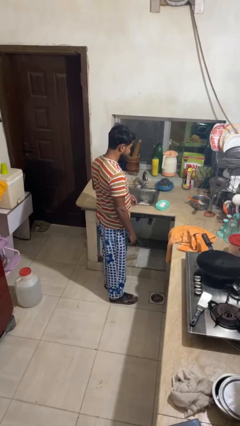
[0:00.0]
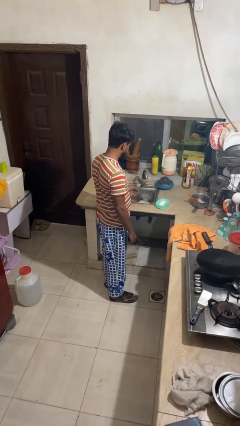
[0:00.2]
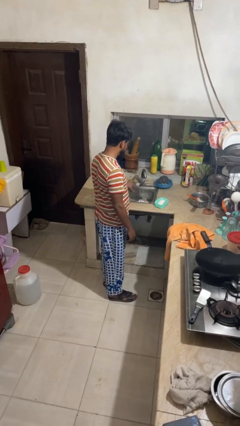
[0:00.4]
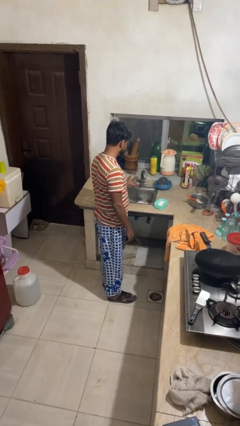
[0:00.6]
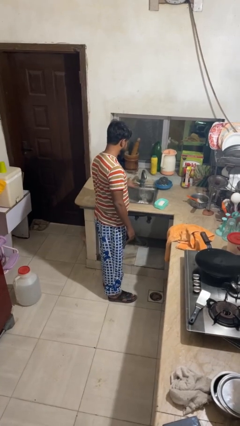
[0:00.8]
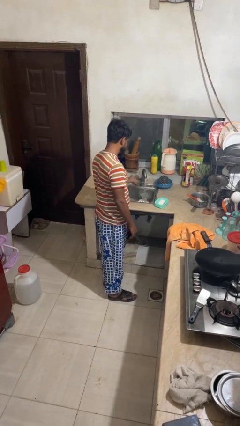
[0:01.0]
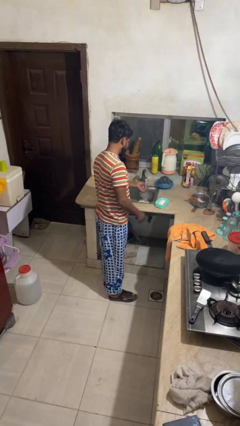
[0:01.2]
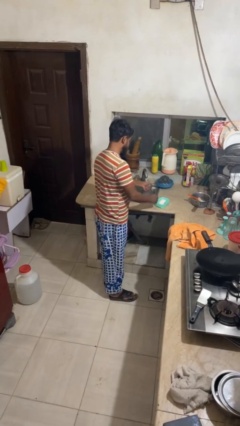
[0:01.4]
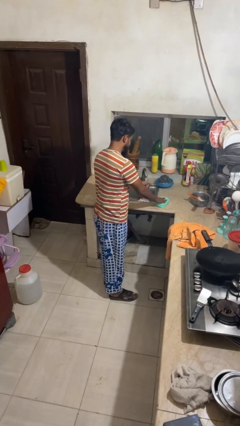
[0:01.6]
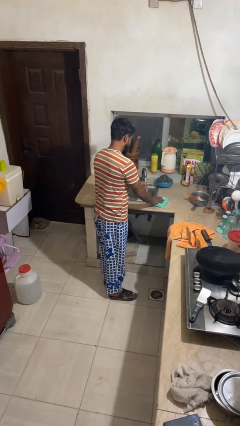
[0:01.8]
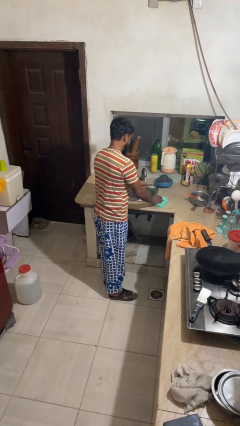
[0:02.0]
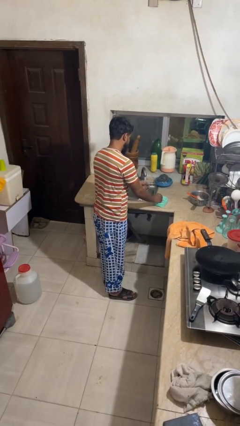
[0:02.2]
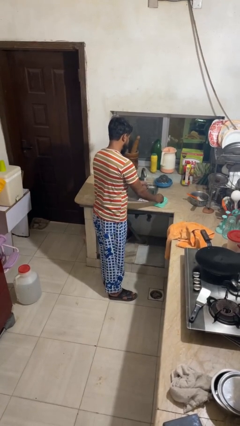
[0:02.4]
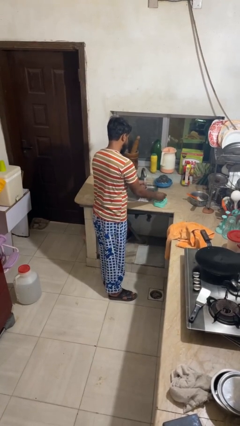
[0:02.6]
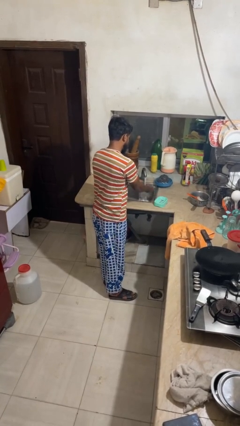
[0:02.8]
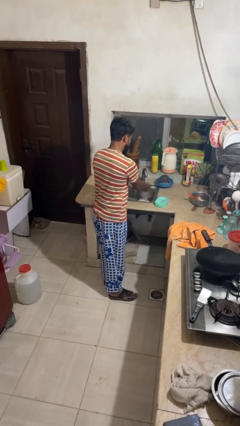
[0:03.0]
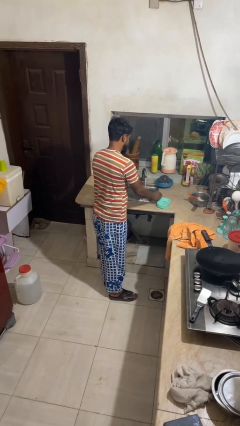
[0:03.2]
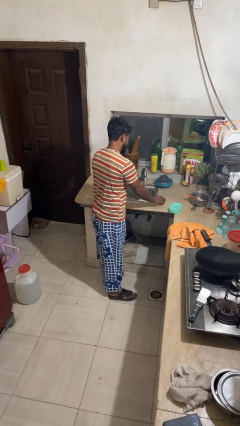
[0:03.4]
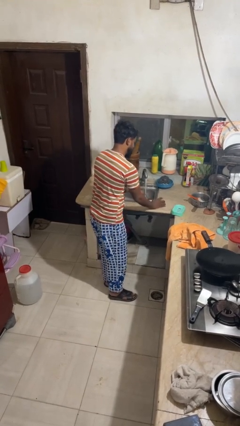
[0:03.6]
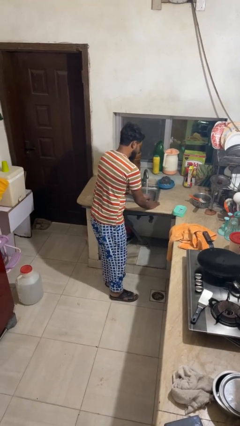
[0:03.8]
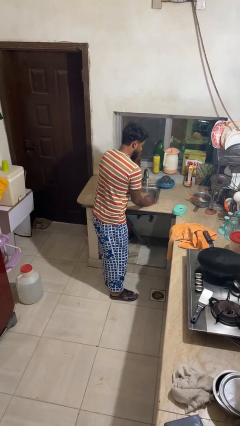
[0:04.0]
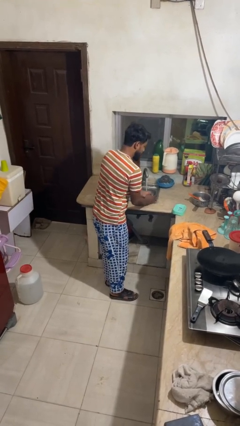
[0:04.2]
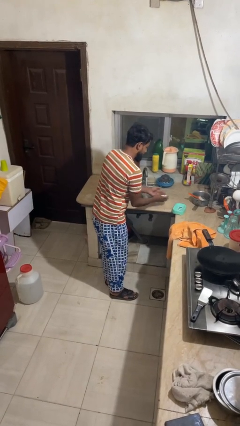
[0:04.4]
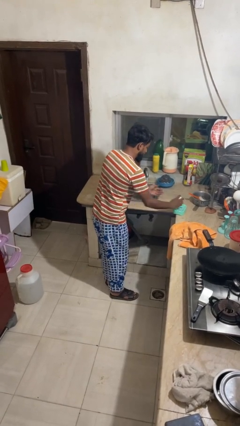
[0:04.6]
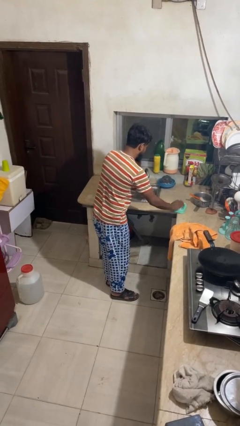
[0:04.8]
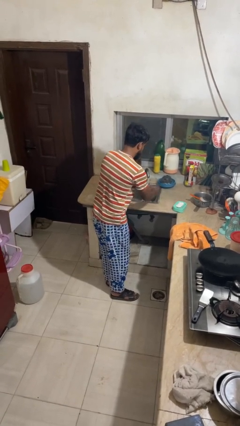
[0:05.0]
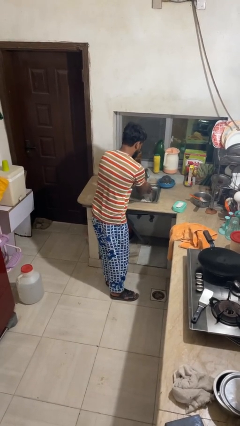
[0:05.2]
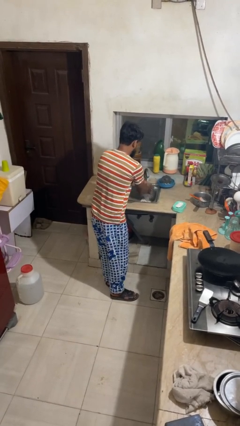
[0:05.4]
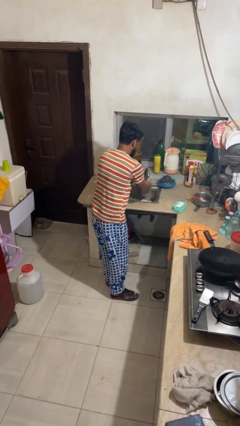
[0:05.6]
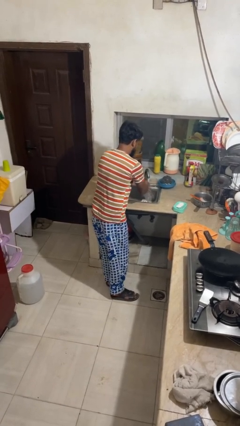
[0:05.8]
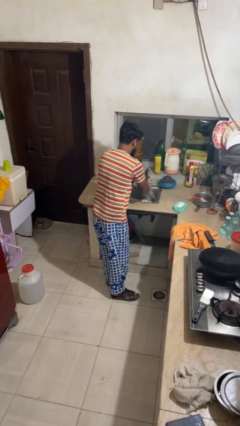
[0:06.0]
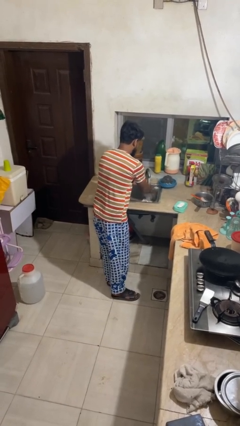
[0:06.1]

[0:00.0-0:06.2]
person washes hands

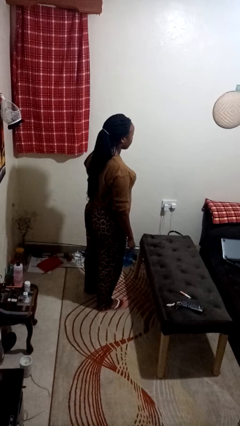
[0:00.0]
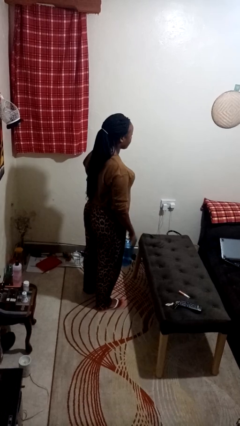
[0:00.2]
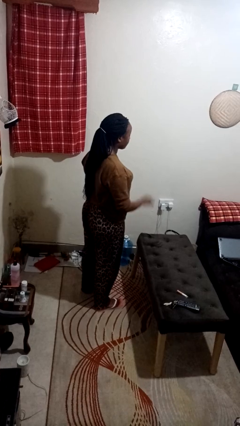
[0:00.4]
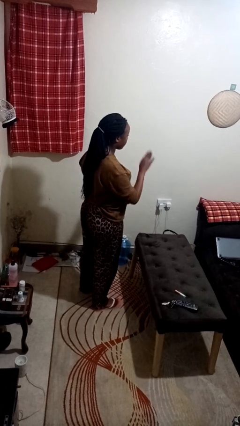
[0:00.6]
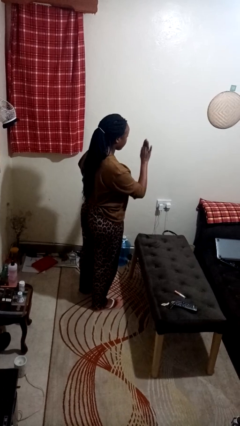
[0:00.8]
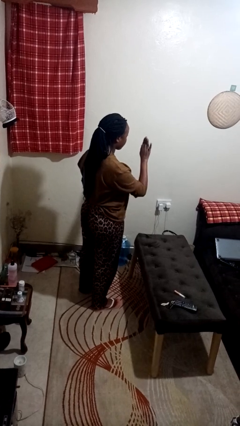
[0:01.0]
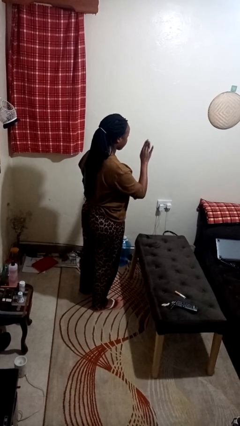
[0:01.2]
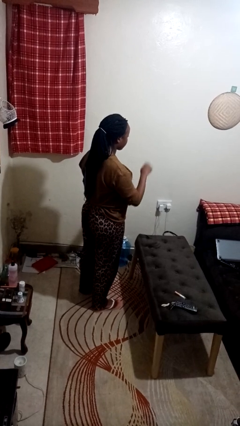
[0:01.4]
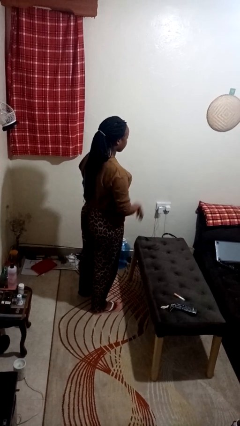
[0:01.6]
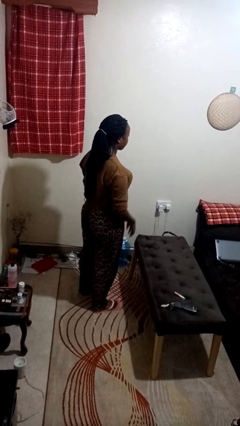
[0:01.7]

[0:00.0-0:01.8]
person gestures stop

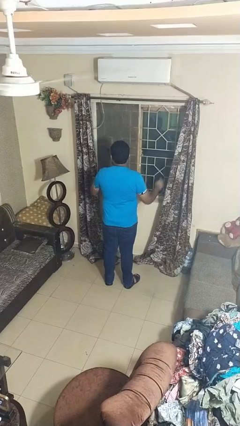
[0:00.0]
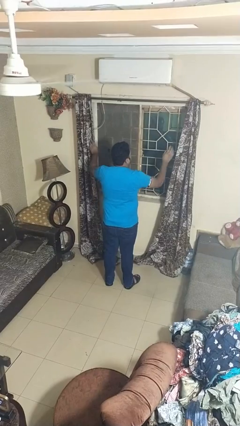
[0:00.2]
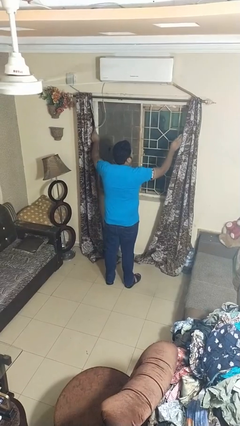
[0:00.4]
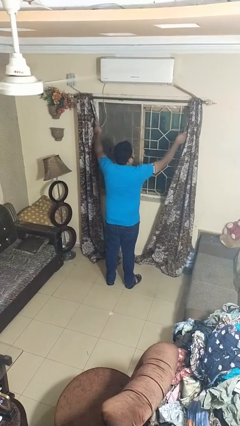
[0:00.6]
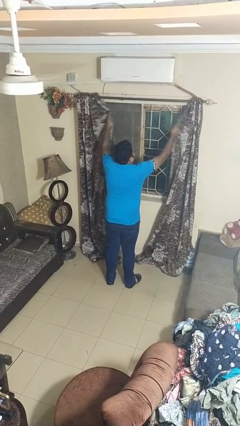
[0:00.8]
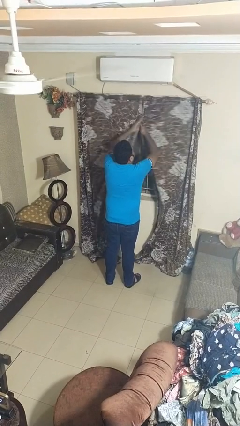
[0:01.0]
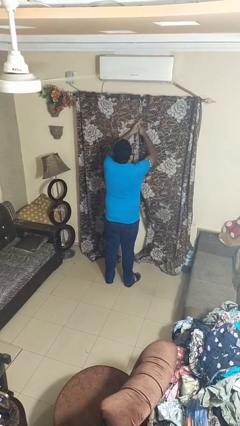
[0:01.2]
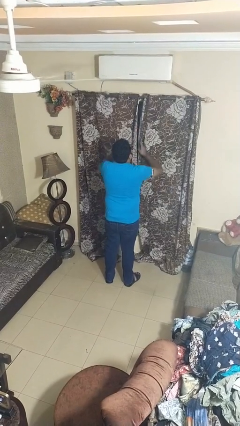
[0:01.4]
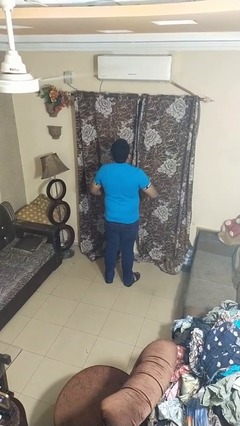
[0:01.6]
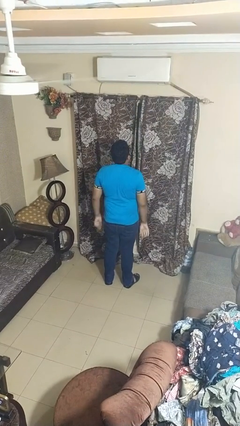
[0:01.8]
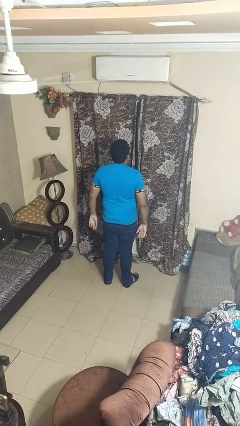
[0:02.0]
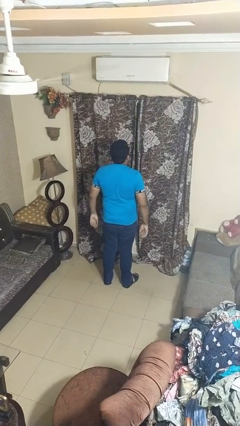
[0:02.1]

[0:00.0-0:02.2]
person closes curtains

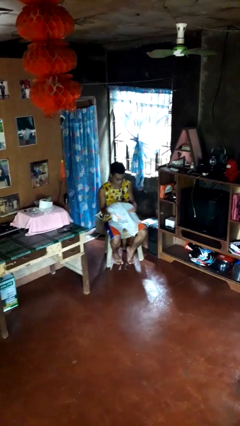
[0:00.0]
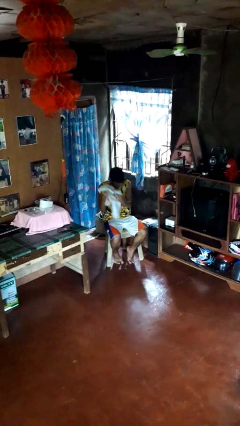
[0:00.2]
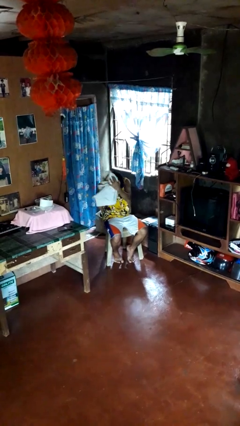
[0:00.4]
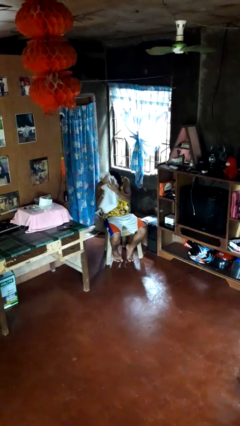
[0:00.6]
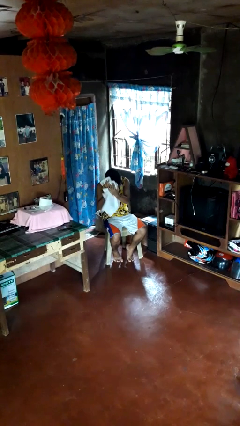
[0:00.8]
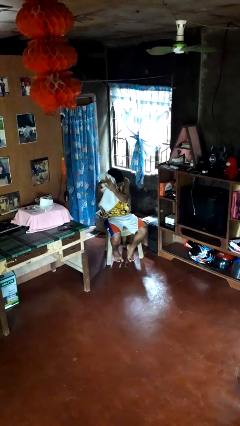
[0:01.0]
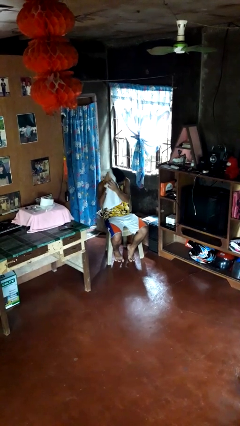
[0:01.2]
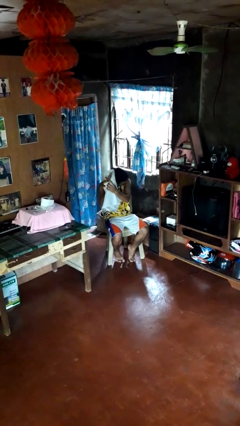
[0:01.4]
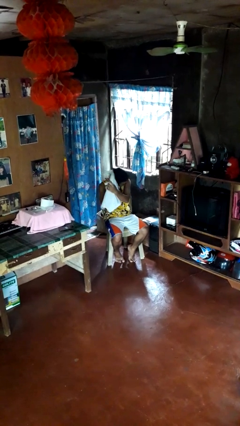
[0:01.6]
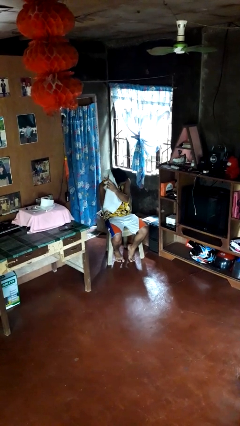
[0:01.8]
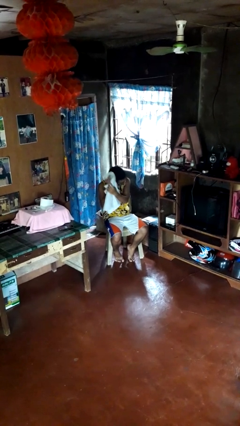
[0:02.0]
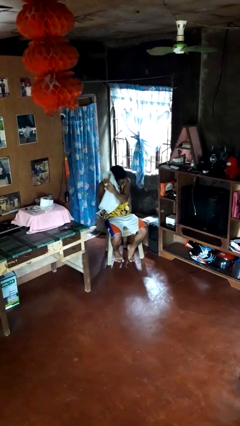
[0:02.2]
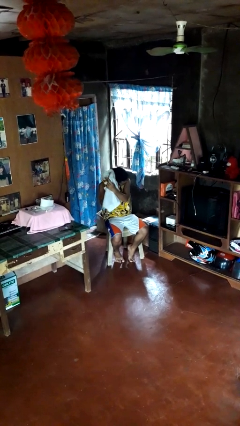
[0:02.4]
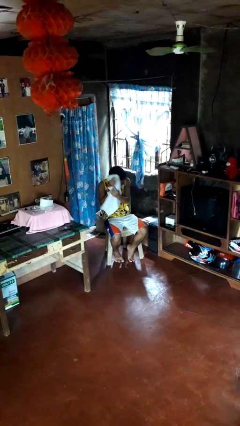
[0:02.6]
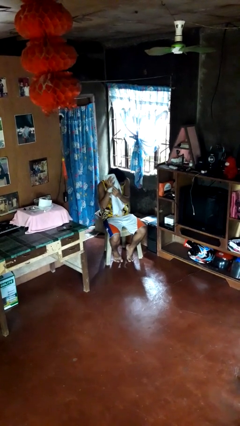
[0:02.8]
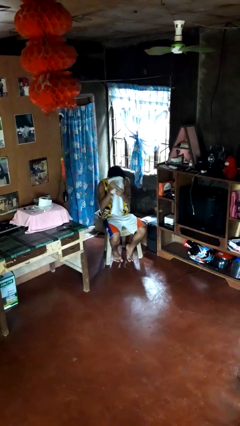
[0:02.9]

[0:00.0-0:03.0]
person dries hair with towel

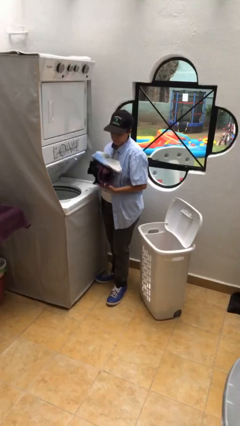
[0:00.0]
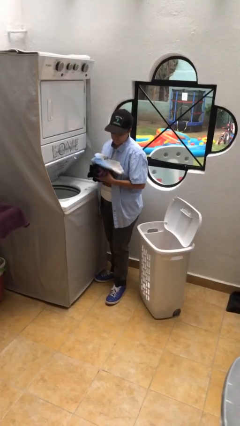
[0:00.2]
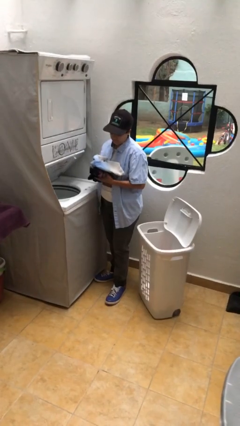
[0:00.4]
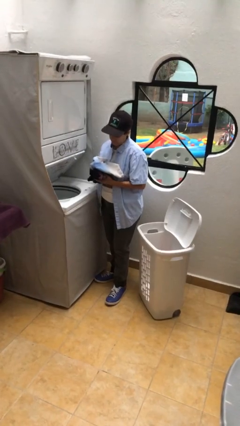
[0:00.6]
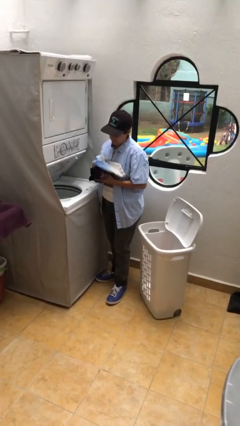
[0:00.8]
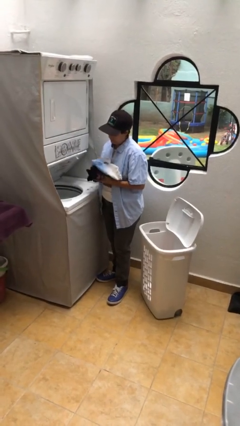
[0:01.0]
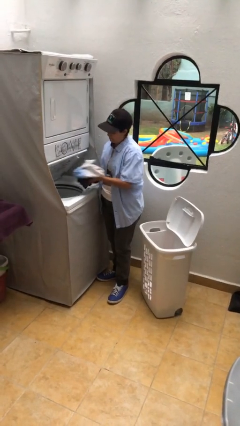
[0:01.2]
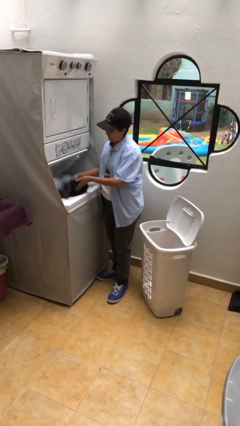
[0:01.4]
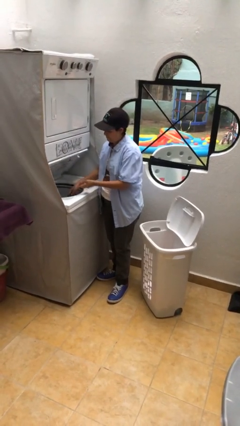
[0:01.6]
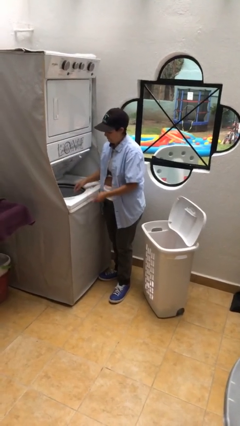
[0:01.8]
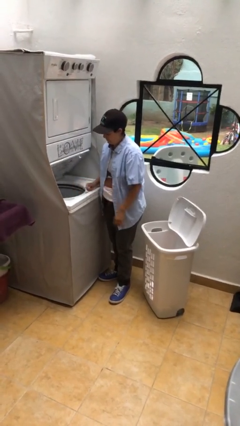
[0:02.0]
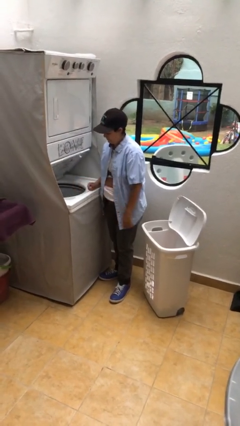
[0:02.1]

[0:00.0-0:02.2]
person loads clotheswasher

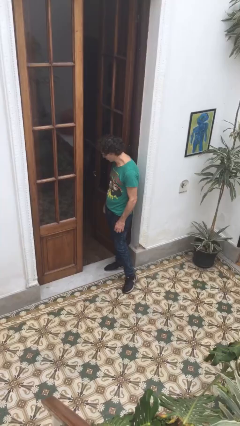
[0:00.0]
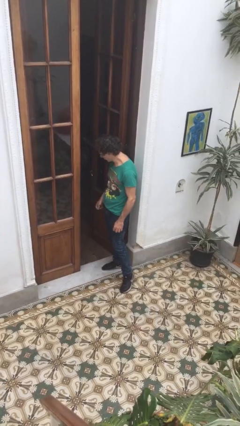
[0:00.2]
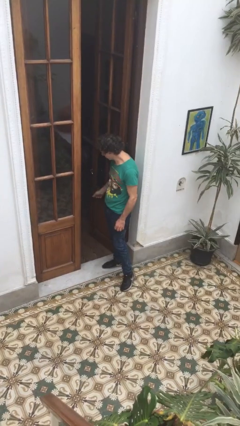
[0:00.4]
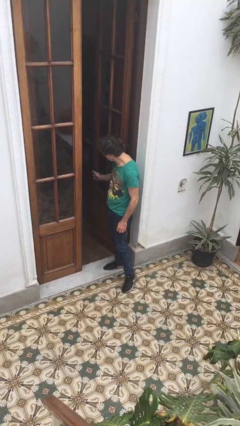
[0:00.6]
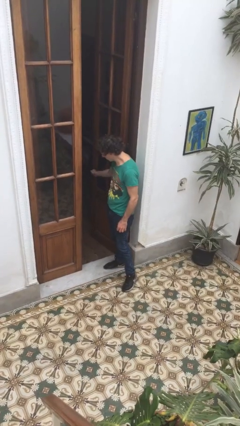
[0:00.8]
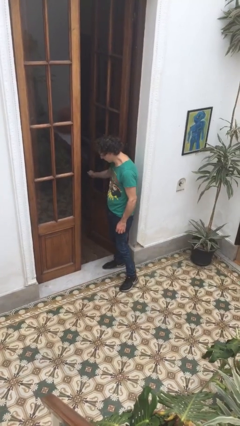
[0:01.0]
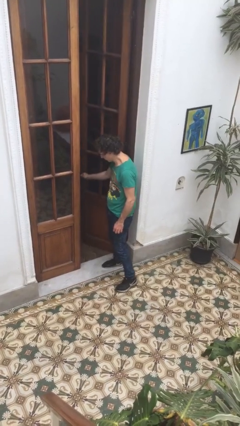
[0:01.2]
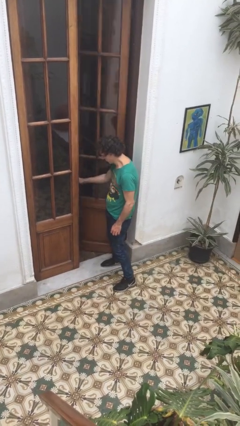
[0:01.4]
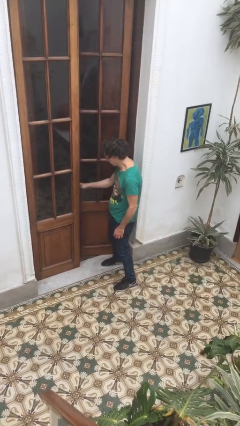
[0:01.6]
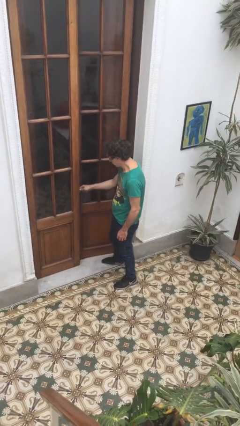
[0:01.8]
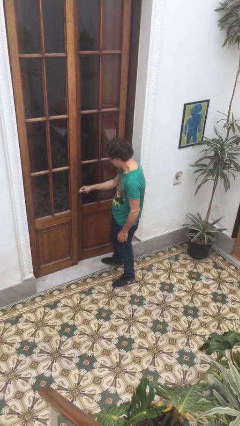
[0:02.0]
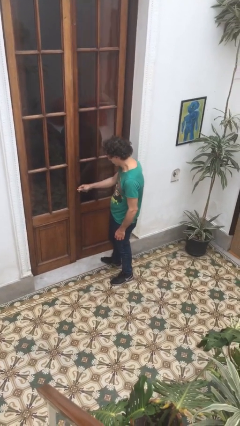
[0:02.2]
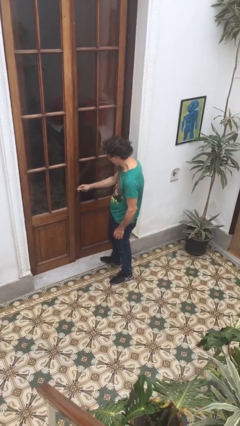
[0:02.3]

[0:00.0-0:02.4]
person closes facility door
